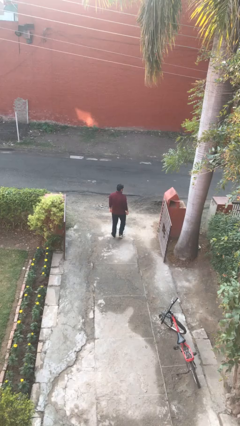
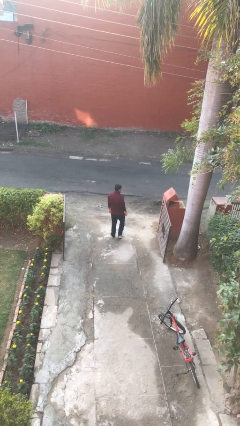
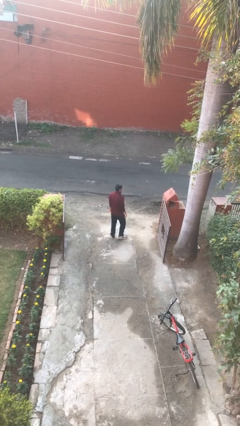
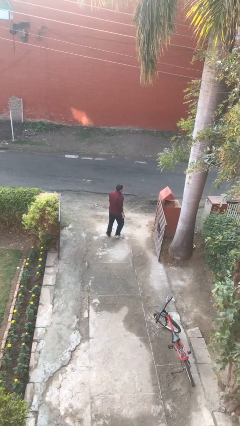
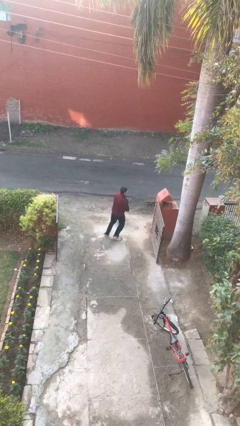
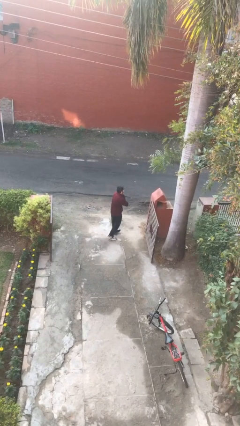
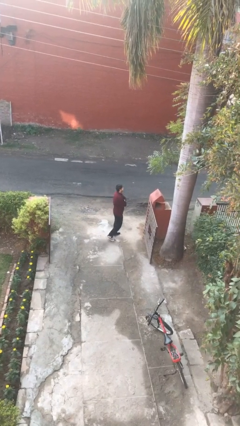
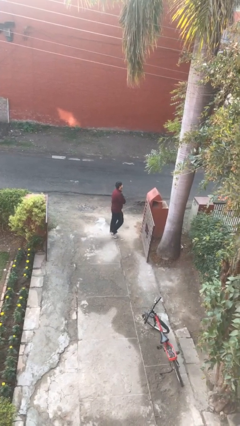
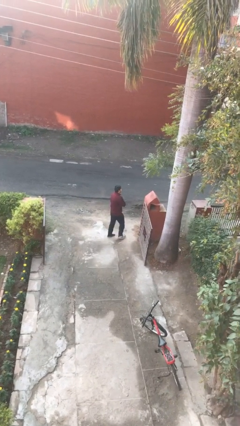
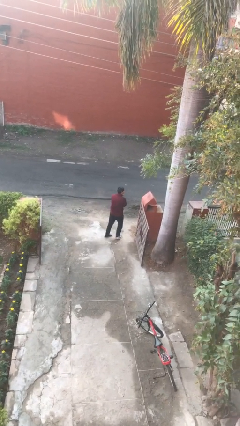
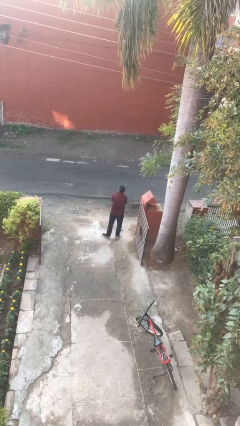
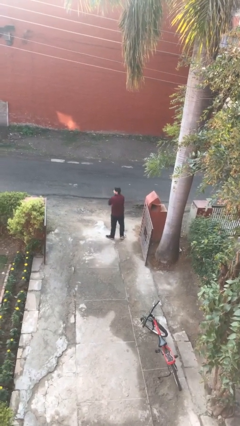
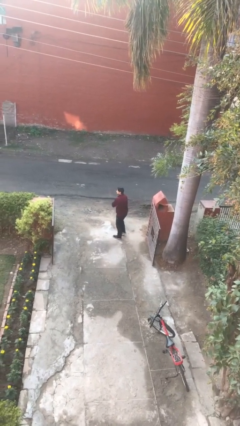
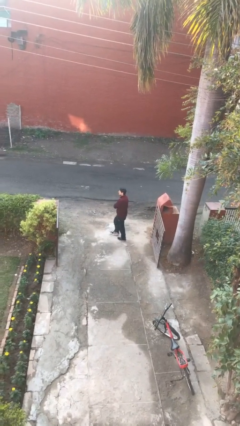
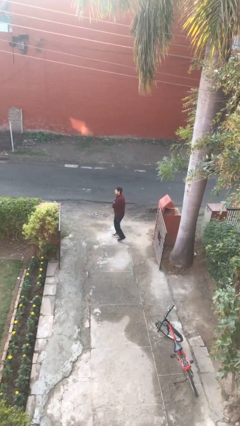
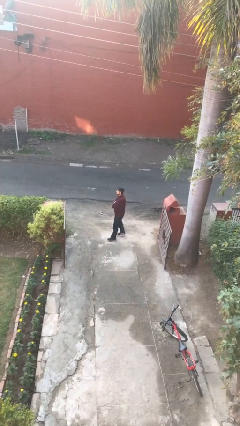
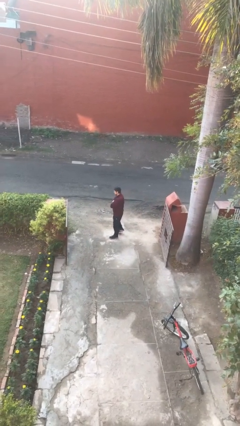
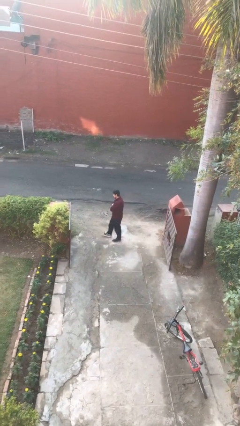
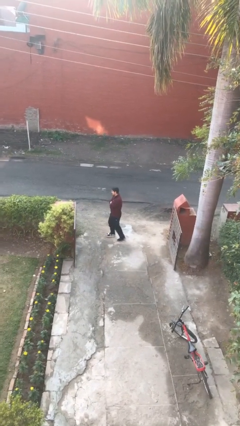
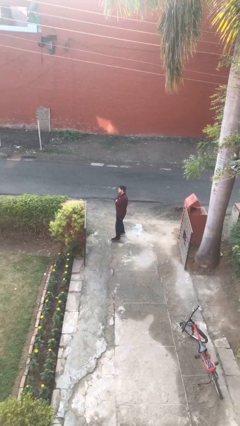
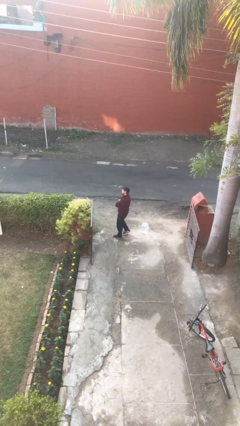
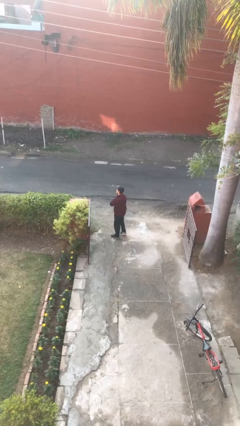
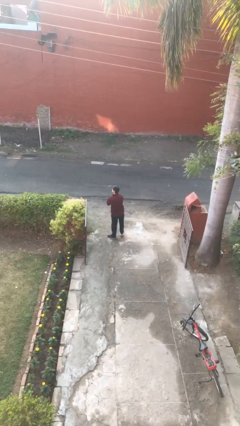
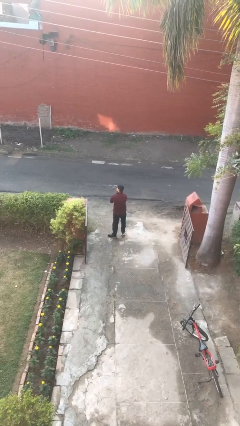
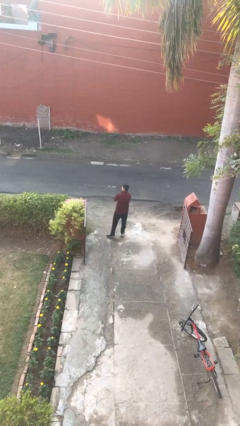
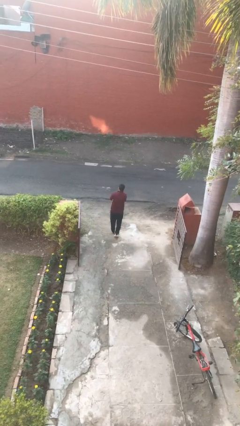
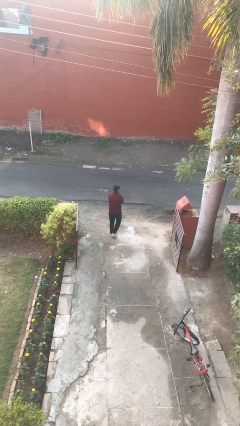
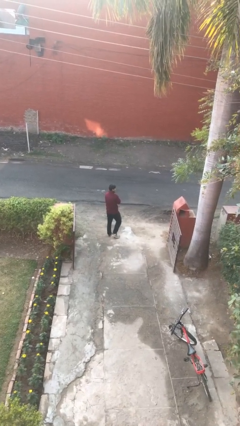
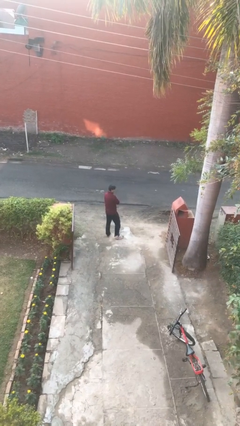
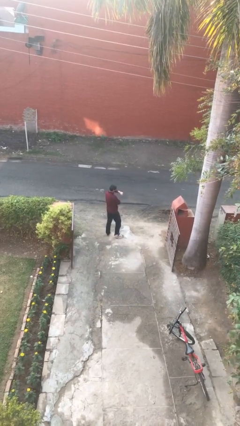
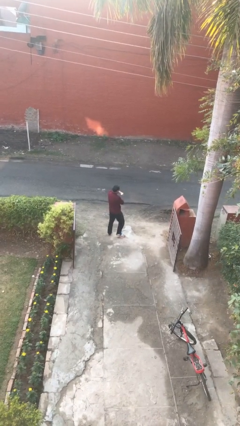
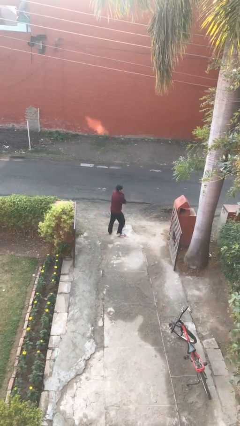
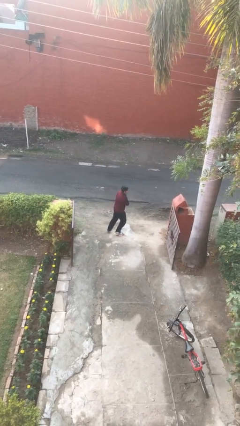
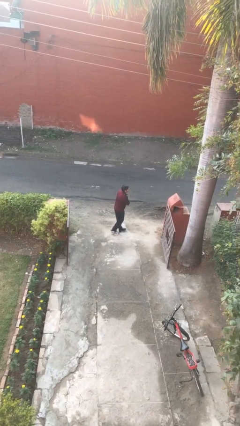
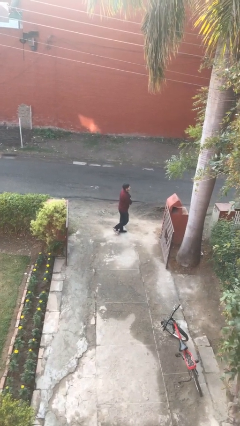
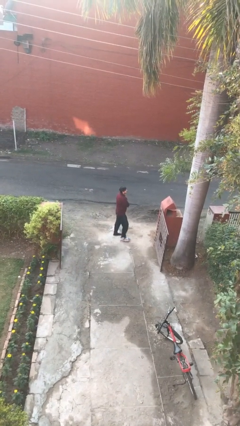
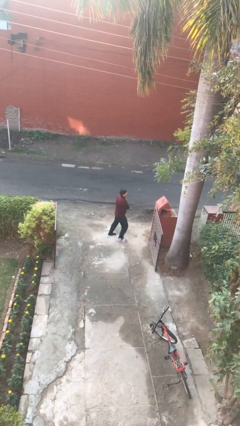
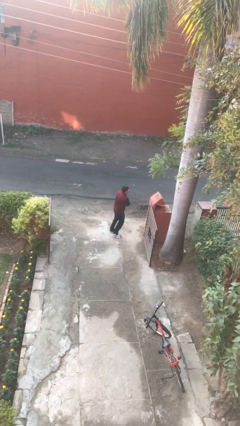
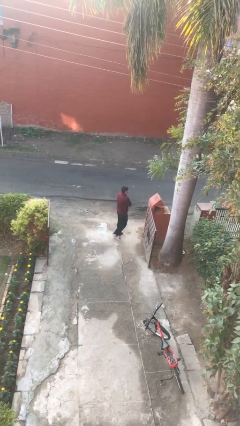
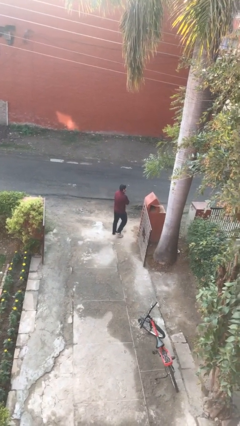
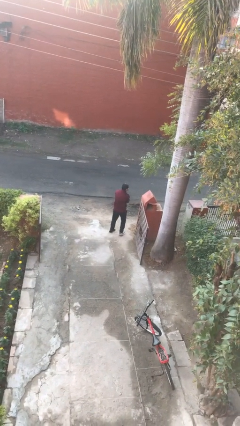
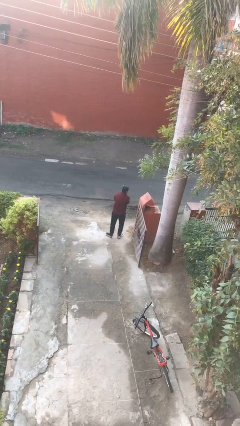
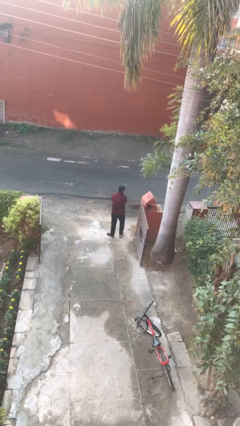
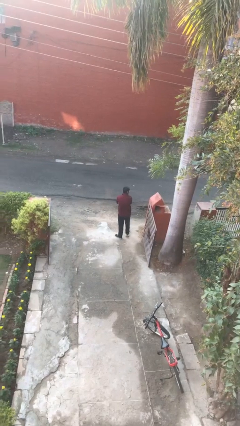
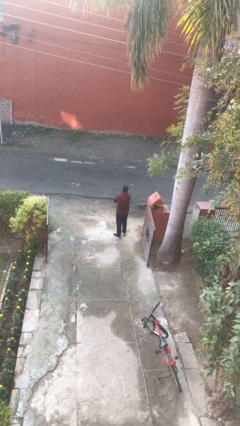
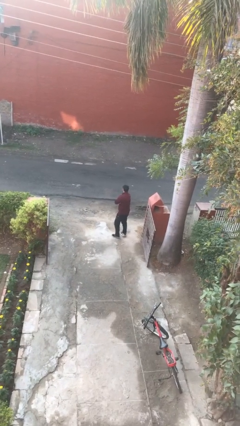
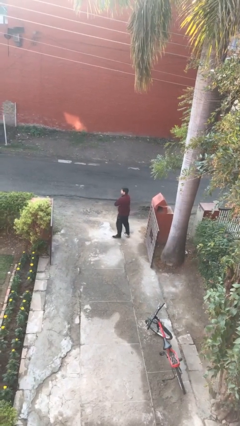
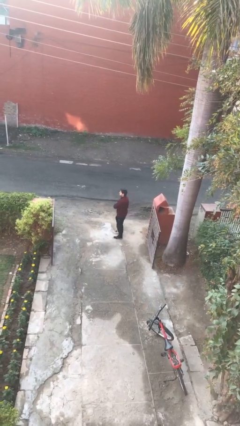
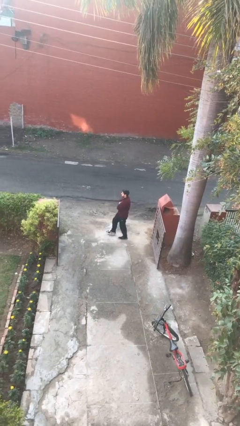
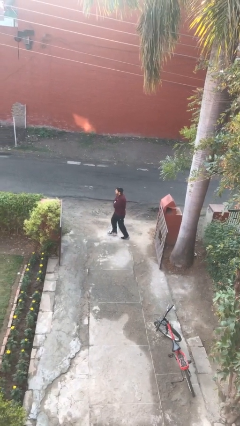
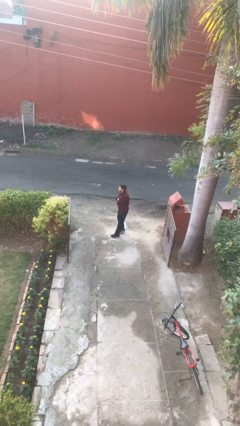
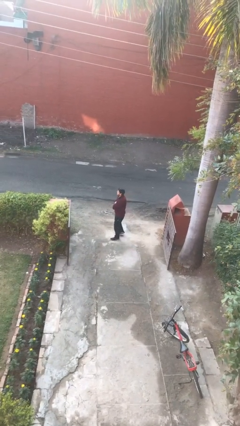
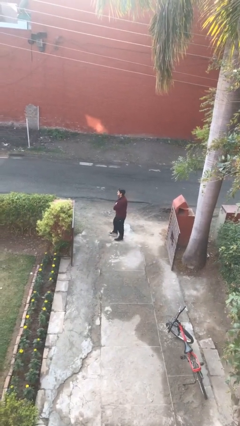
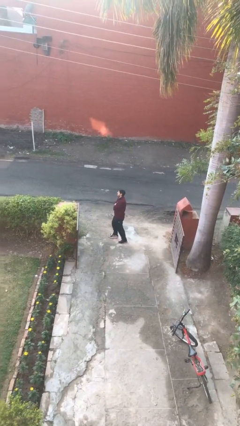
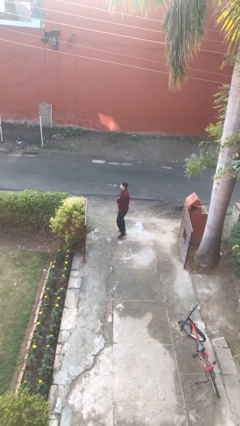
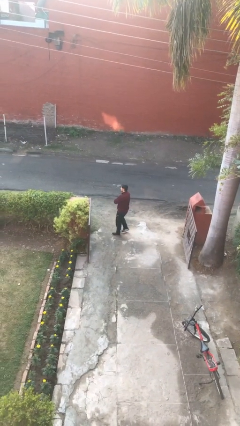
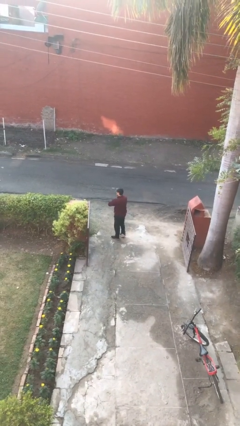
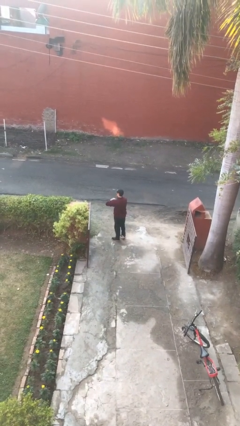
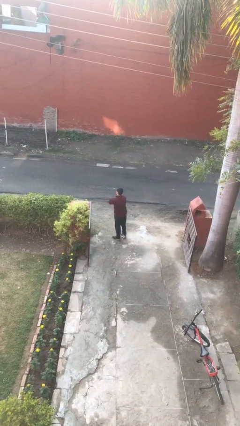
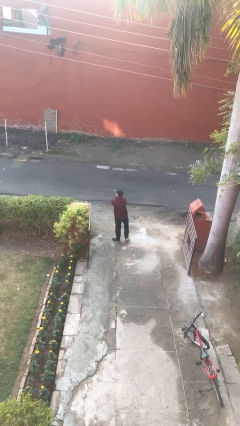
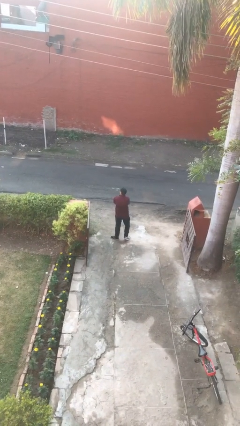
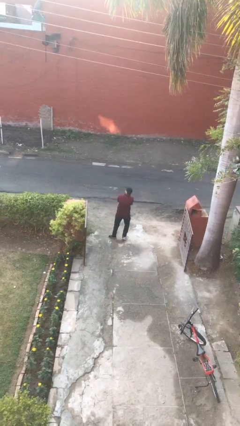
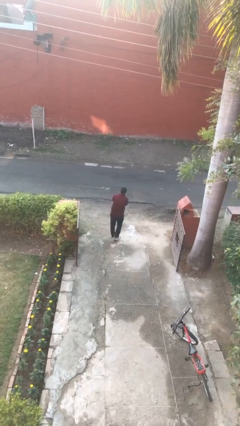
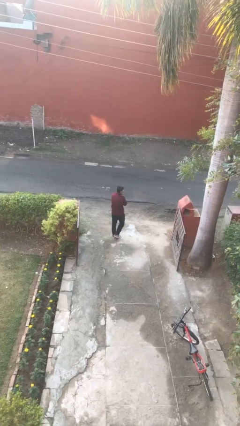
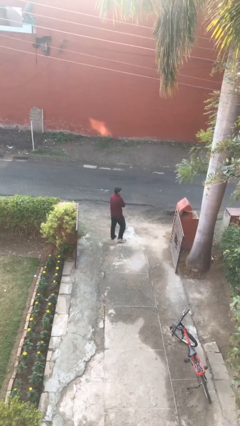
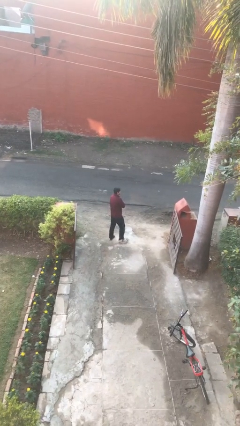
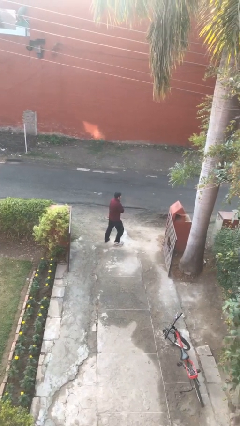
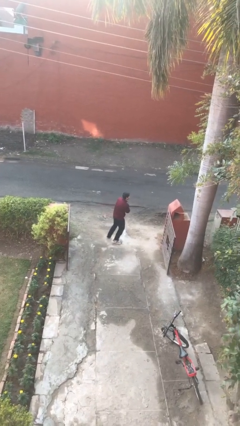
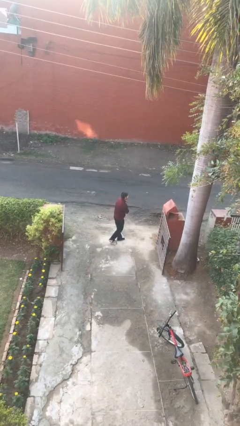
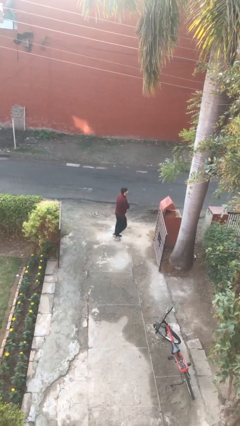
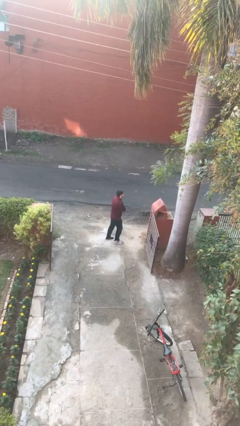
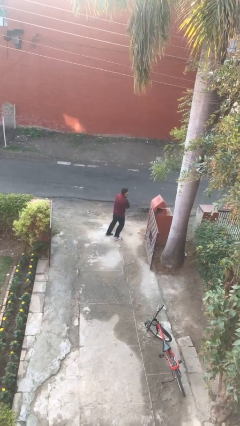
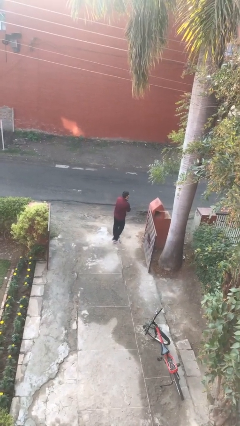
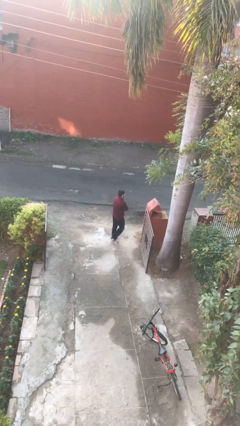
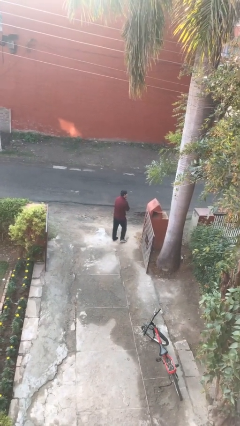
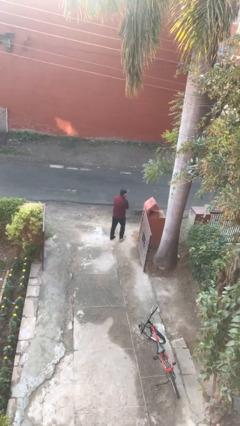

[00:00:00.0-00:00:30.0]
person walks

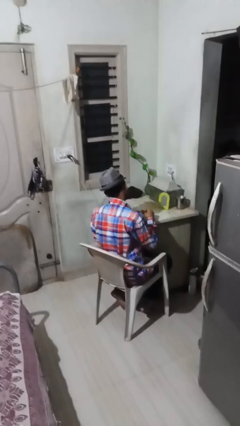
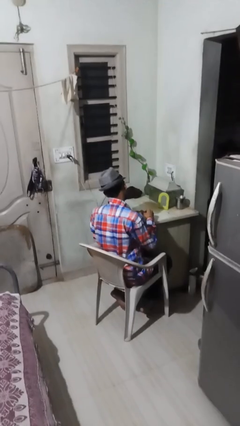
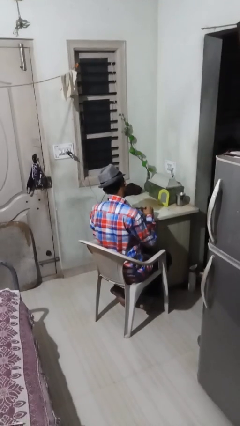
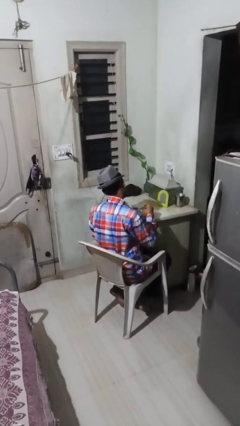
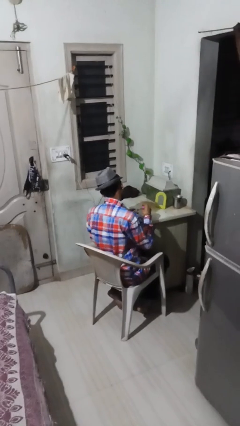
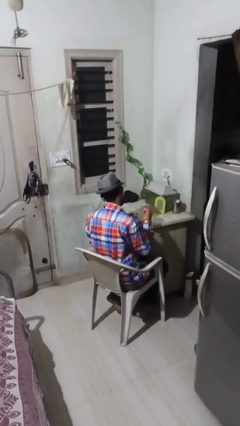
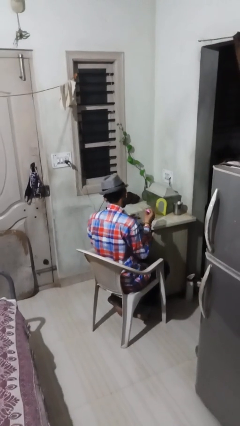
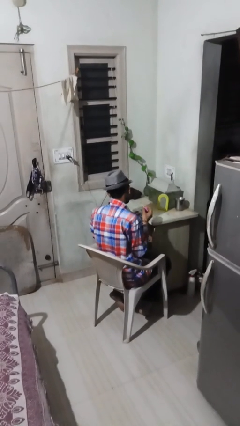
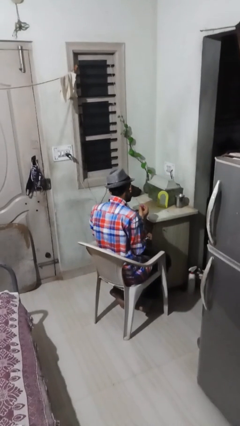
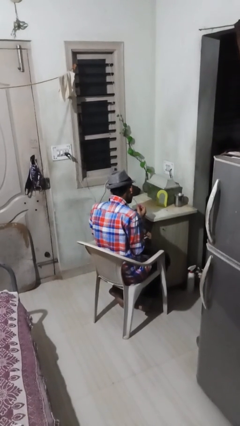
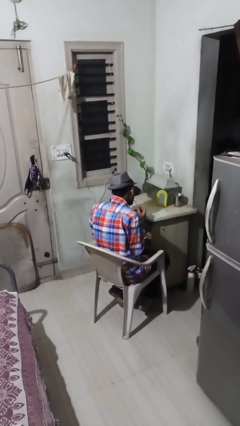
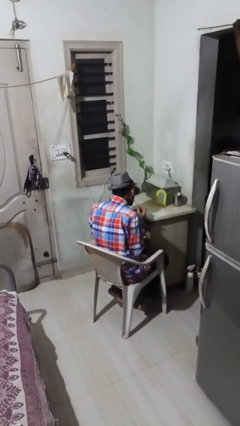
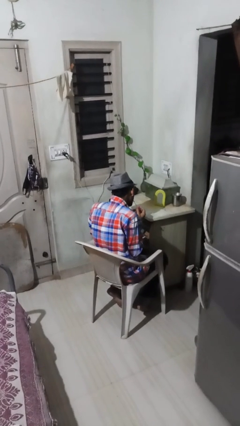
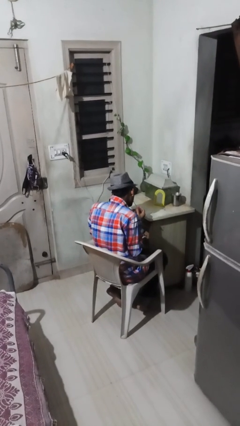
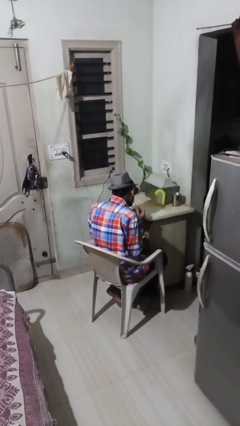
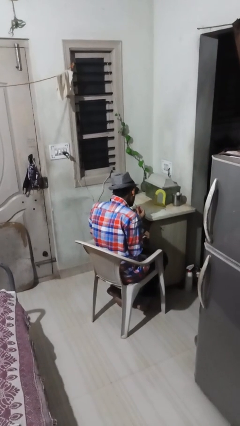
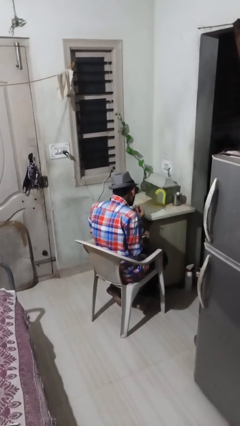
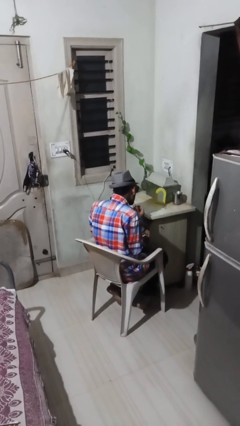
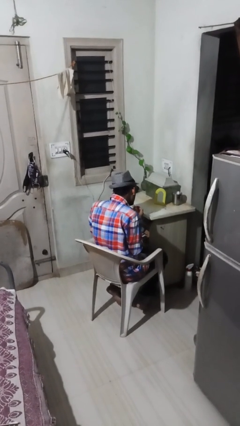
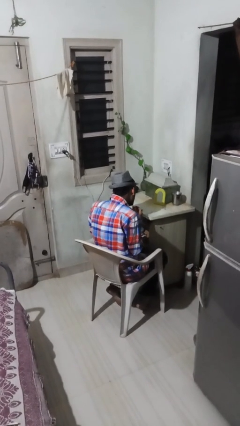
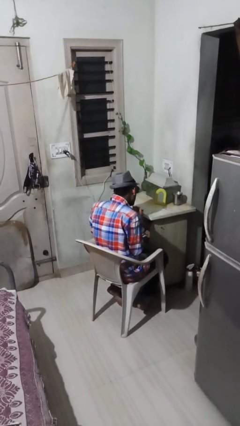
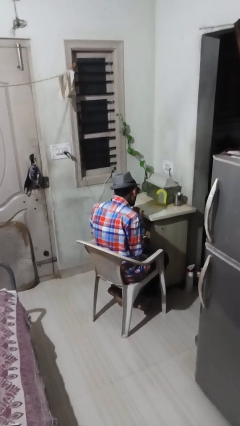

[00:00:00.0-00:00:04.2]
person applies lip makeup
